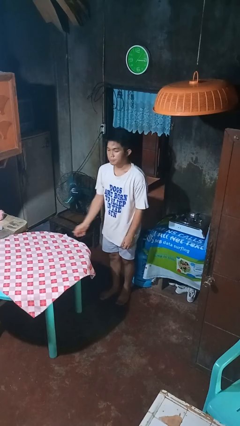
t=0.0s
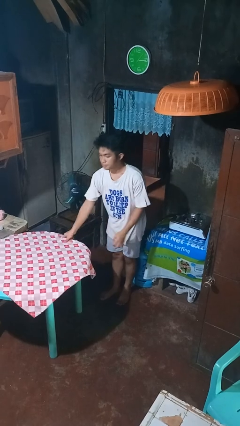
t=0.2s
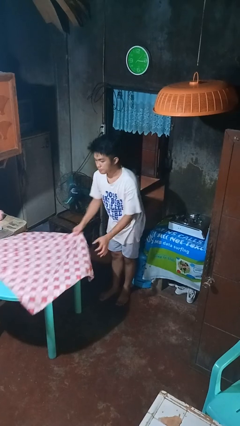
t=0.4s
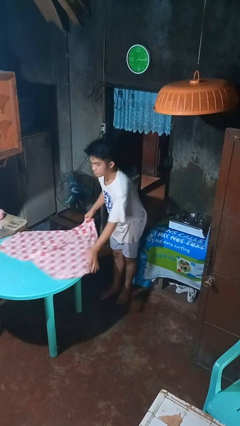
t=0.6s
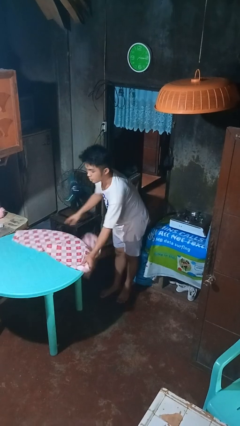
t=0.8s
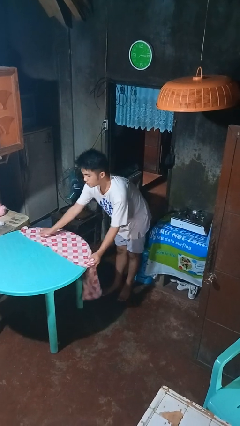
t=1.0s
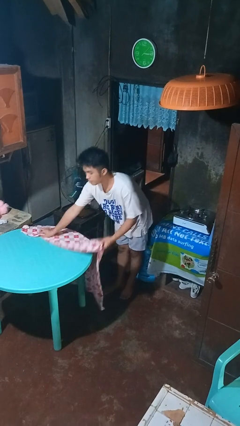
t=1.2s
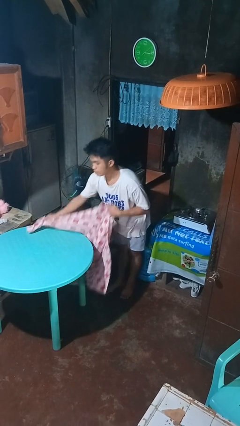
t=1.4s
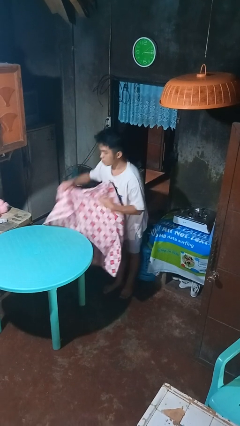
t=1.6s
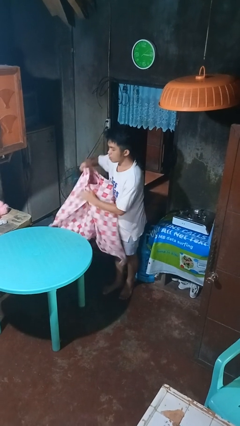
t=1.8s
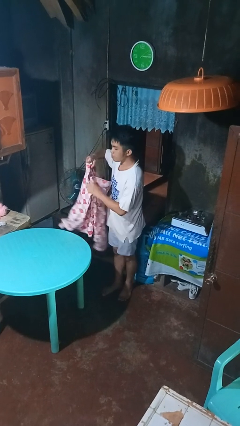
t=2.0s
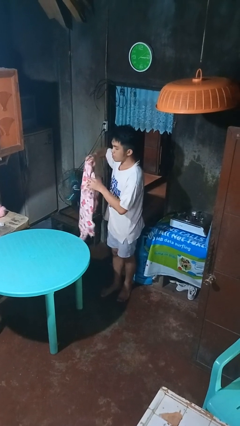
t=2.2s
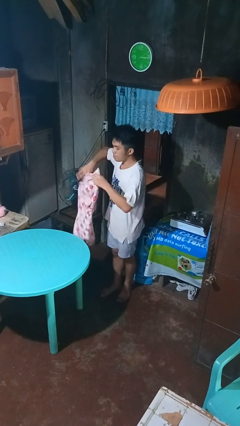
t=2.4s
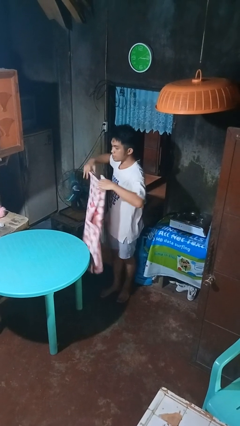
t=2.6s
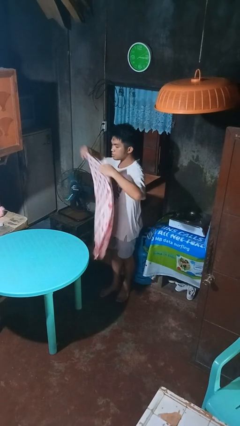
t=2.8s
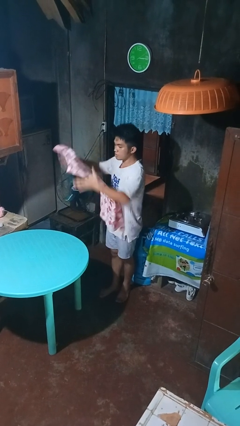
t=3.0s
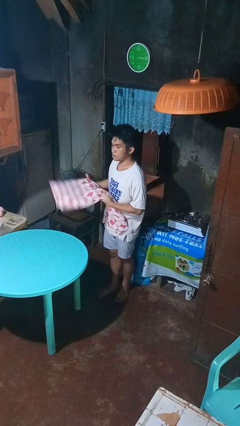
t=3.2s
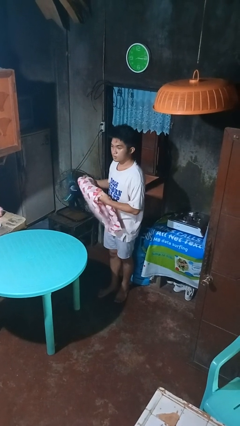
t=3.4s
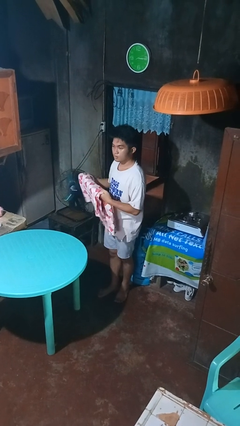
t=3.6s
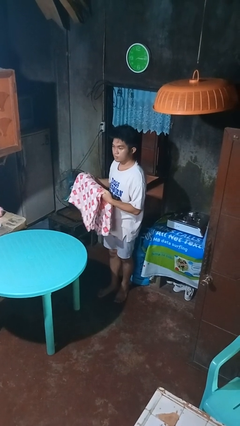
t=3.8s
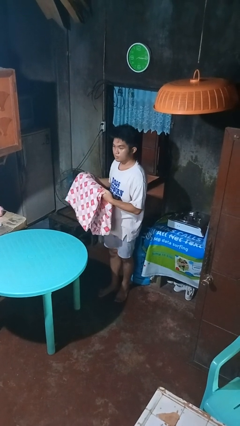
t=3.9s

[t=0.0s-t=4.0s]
person folds tablecloth

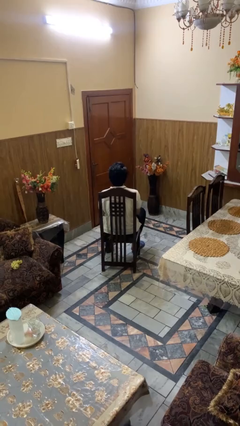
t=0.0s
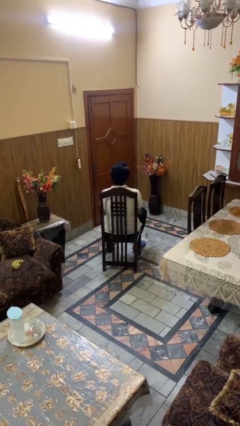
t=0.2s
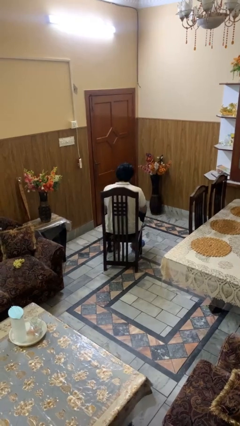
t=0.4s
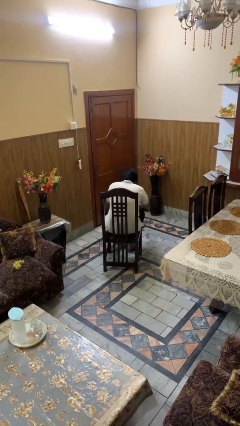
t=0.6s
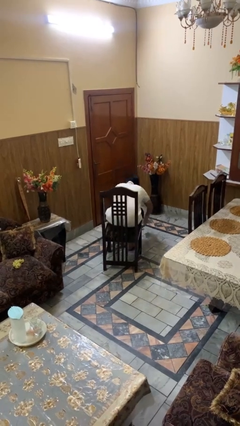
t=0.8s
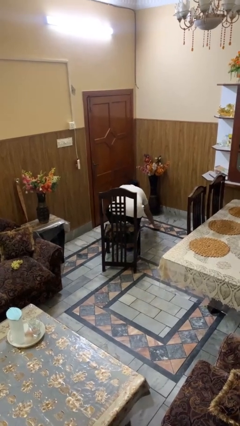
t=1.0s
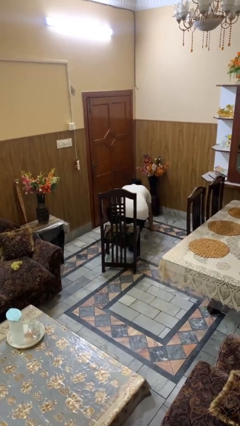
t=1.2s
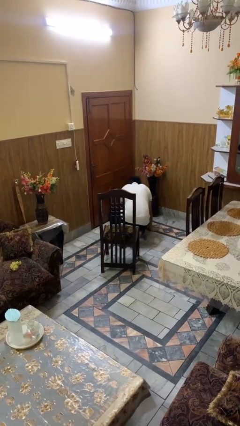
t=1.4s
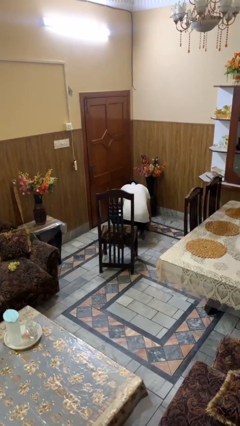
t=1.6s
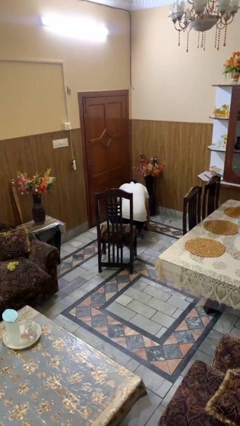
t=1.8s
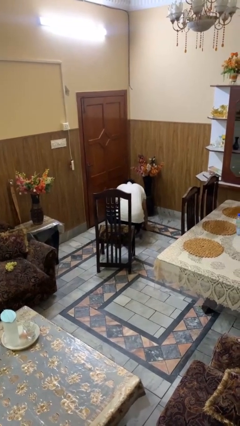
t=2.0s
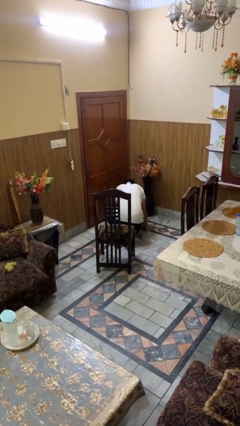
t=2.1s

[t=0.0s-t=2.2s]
person falls from chair

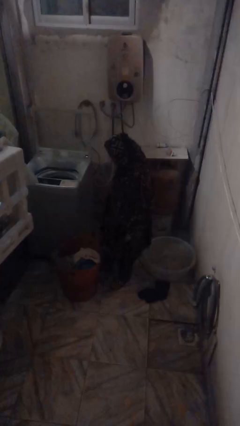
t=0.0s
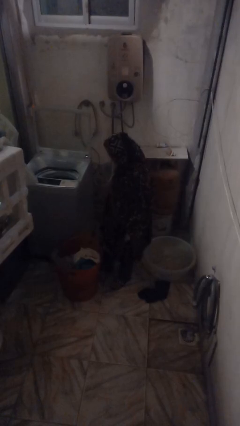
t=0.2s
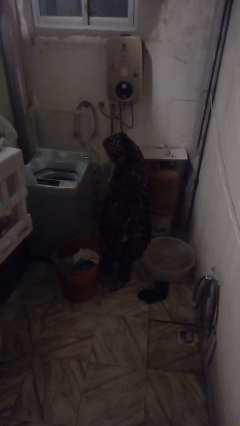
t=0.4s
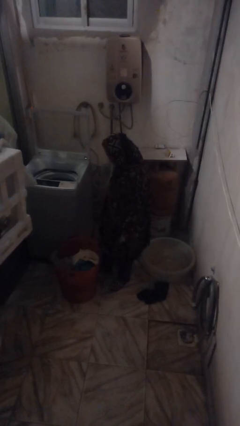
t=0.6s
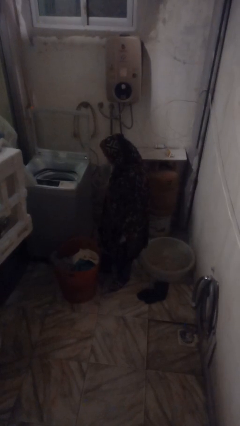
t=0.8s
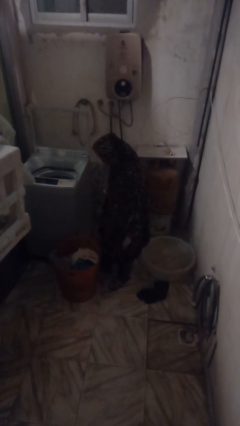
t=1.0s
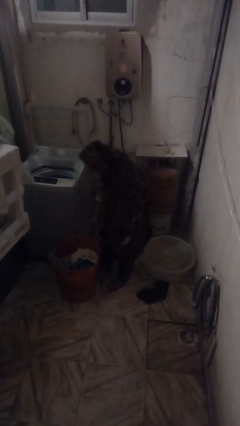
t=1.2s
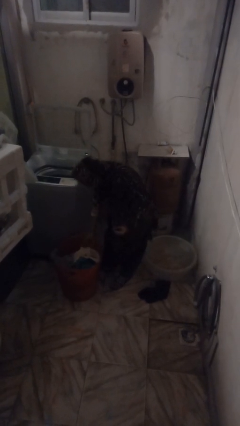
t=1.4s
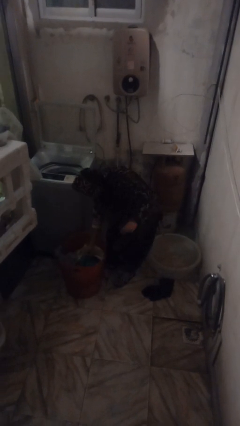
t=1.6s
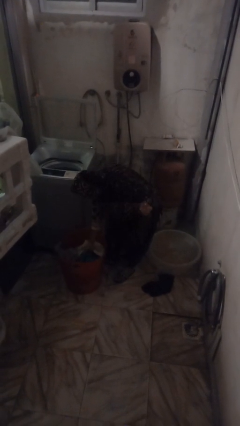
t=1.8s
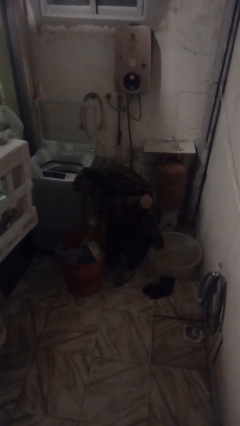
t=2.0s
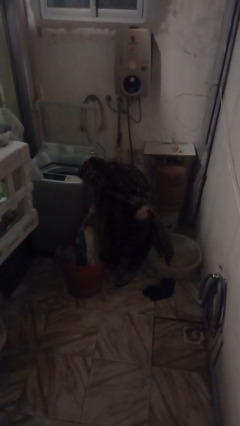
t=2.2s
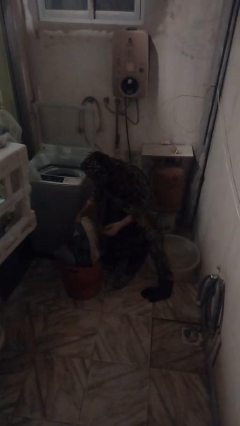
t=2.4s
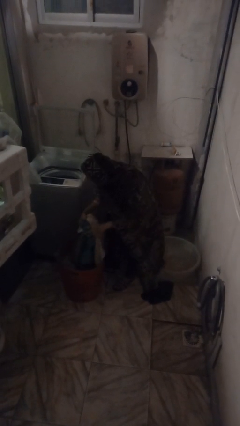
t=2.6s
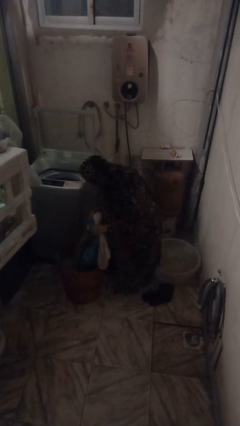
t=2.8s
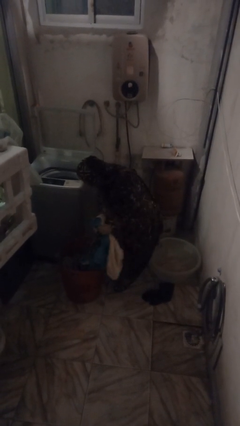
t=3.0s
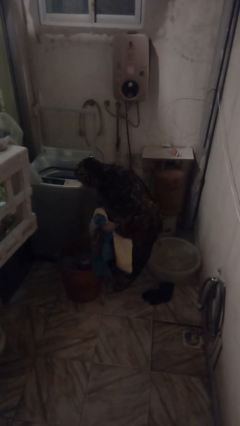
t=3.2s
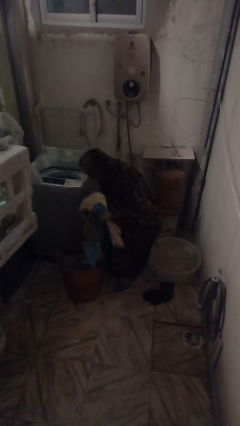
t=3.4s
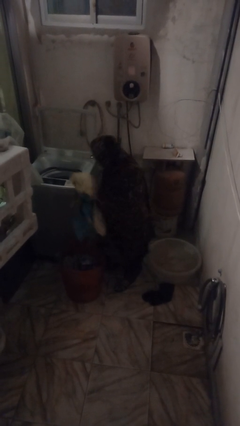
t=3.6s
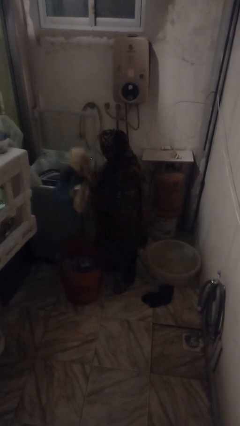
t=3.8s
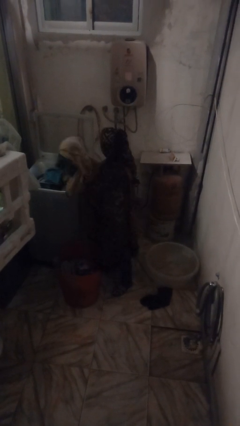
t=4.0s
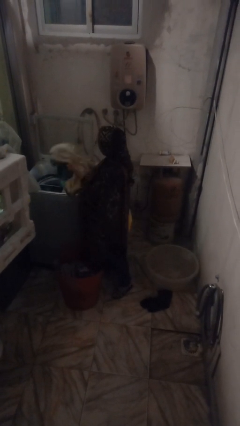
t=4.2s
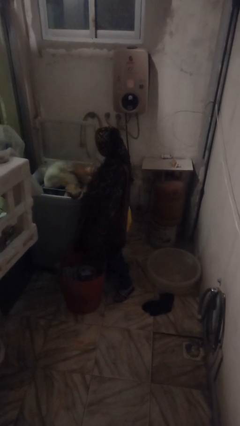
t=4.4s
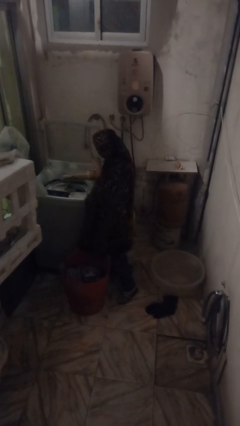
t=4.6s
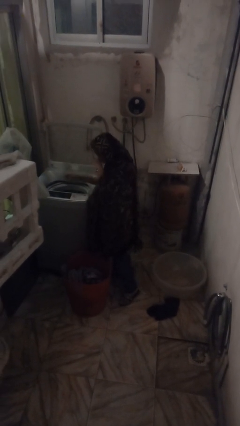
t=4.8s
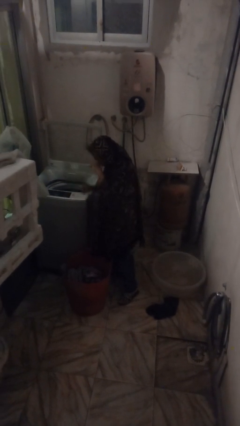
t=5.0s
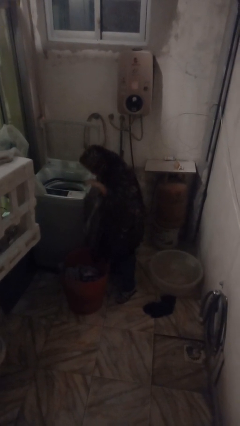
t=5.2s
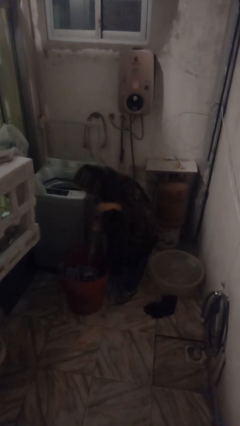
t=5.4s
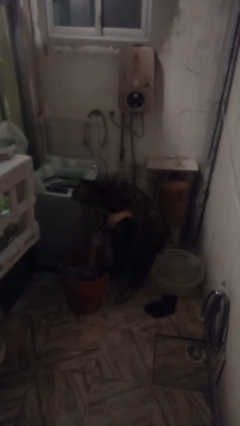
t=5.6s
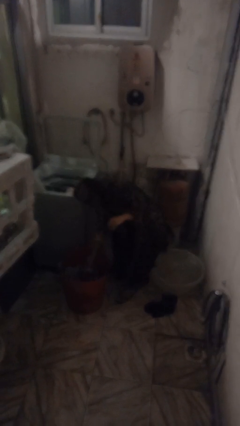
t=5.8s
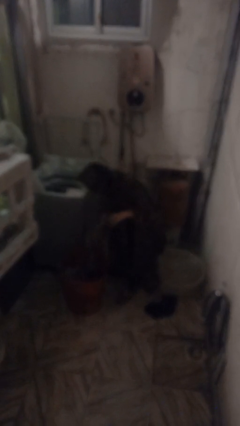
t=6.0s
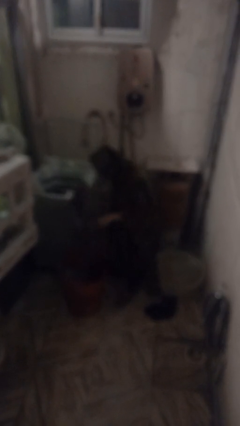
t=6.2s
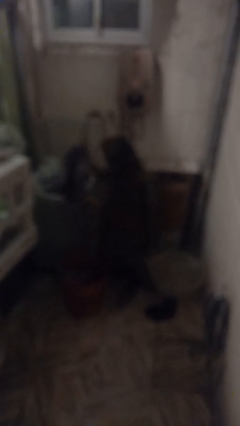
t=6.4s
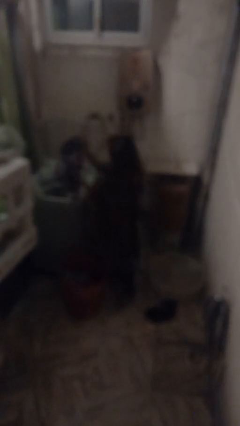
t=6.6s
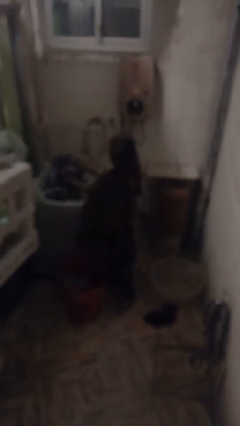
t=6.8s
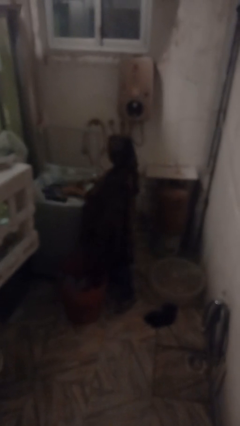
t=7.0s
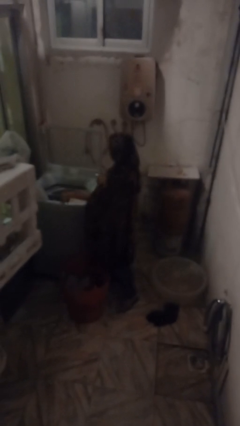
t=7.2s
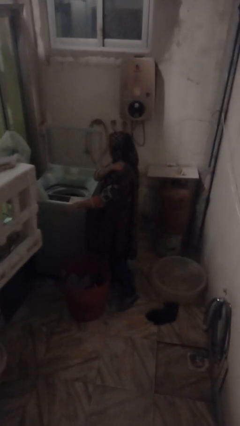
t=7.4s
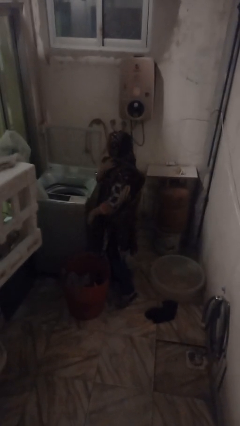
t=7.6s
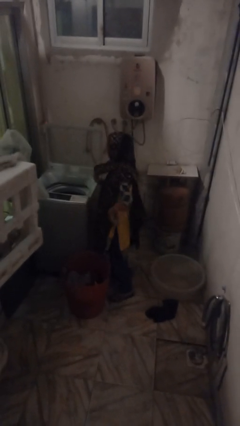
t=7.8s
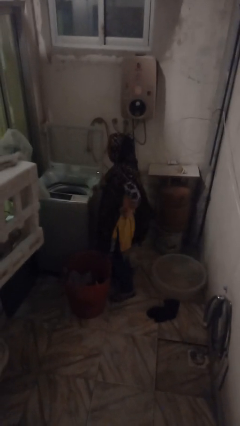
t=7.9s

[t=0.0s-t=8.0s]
person loads clotheswasher

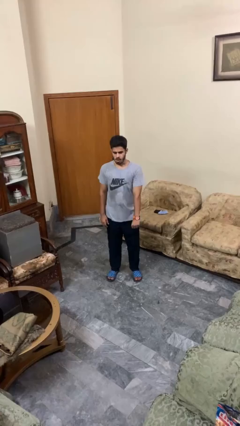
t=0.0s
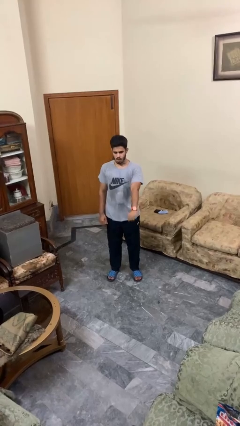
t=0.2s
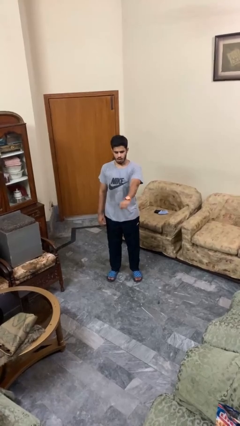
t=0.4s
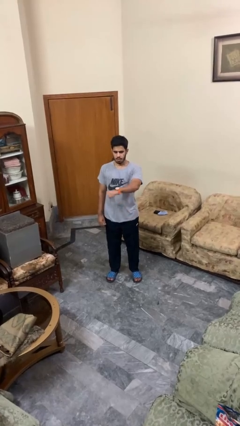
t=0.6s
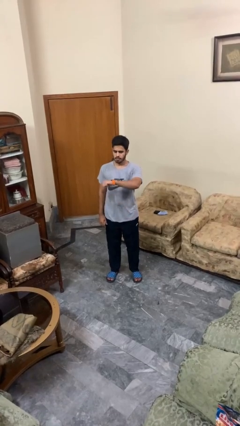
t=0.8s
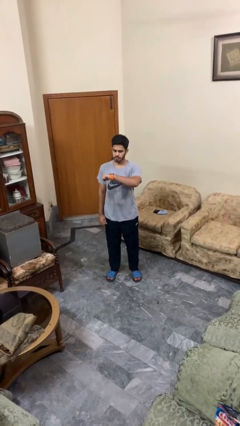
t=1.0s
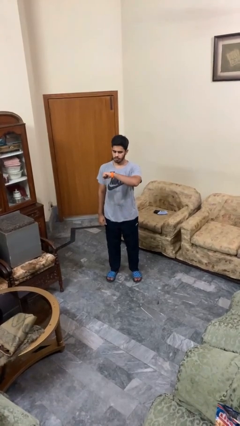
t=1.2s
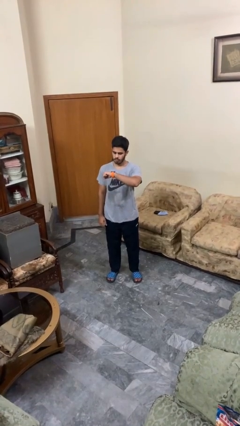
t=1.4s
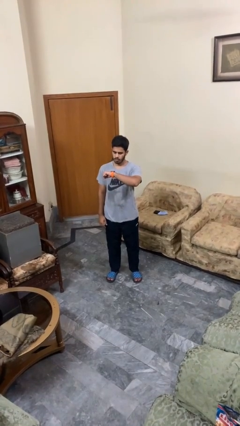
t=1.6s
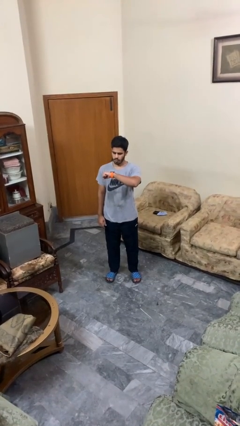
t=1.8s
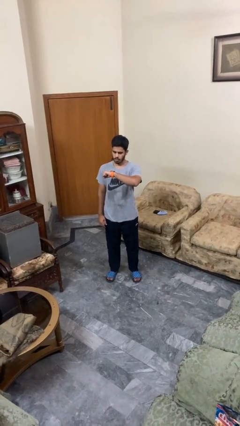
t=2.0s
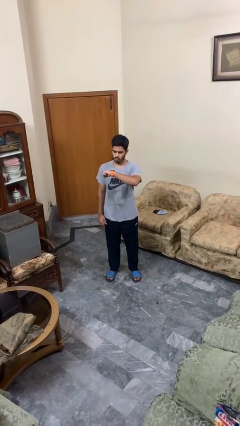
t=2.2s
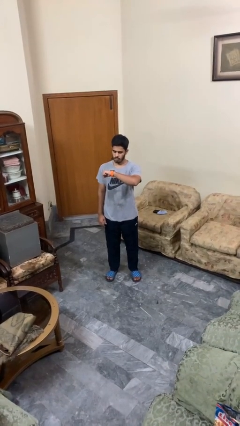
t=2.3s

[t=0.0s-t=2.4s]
person looks at wristwatch

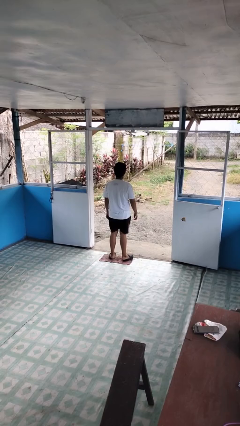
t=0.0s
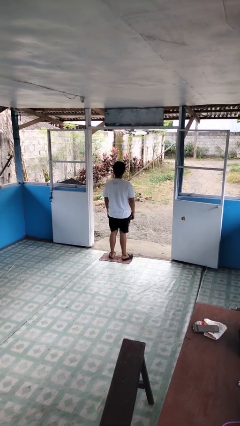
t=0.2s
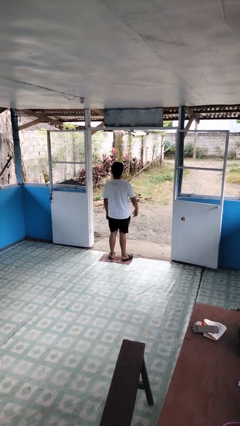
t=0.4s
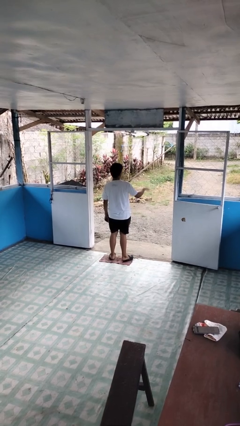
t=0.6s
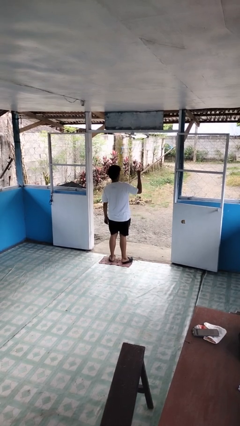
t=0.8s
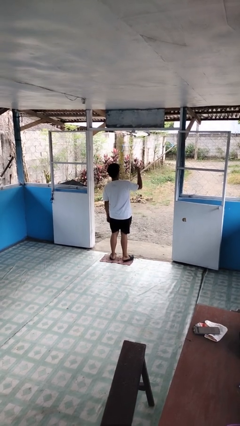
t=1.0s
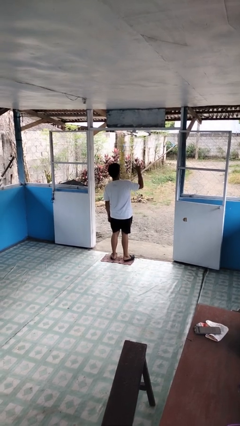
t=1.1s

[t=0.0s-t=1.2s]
person gestures hang loose
